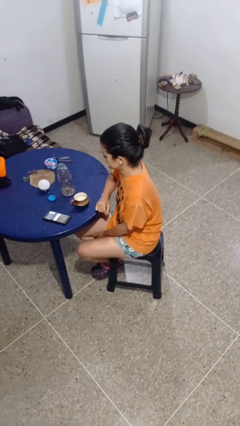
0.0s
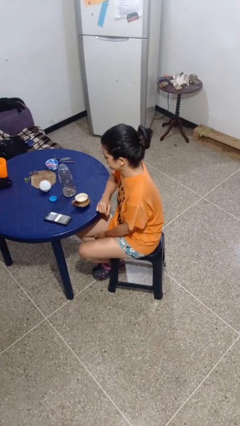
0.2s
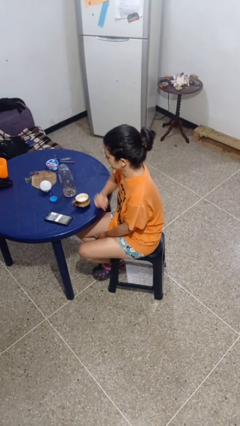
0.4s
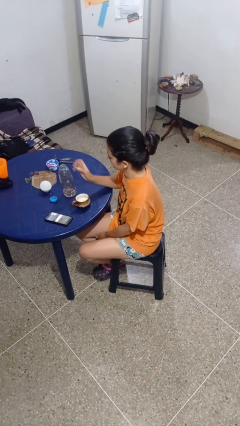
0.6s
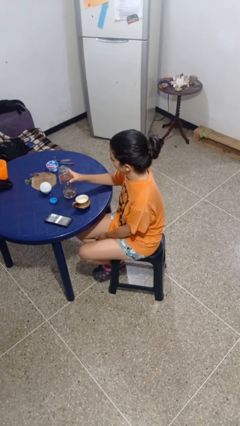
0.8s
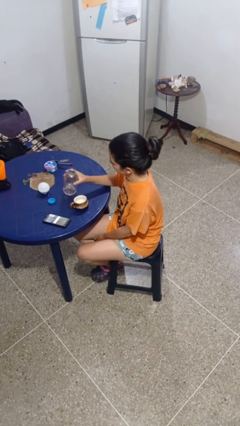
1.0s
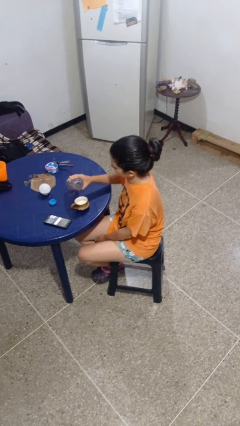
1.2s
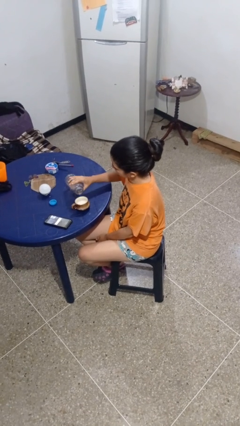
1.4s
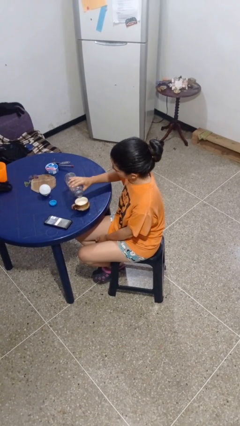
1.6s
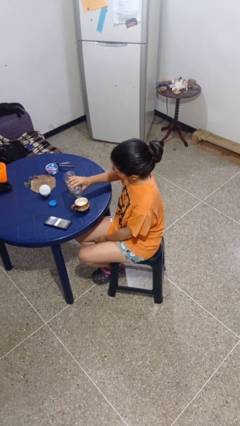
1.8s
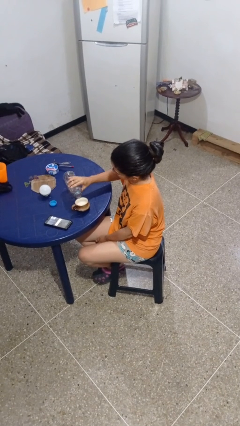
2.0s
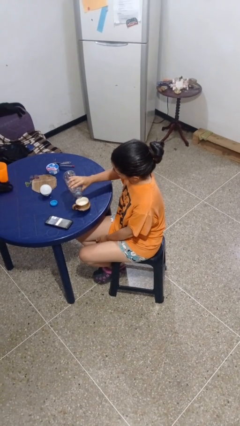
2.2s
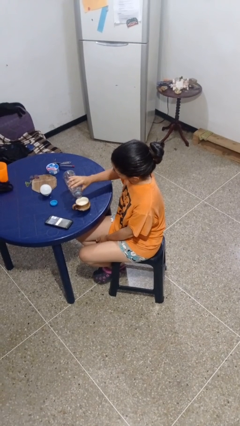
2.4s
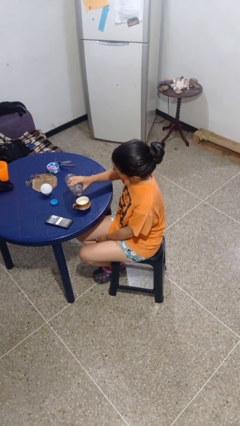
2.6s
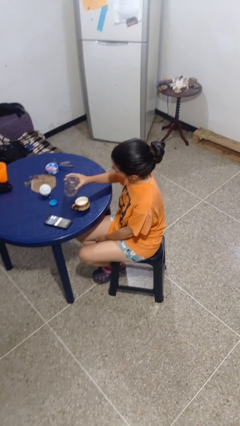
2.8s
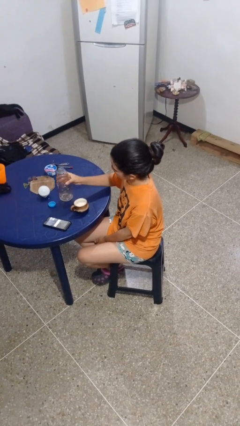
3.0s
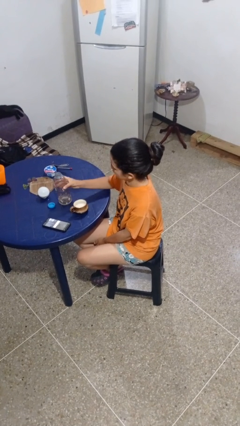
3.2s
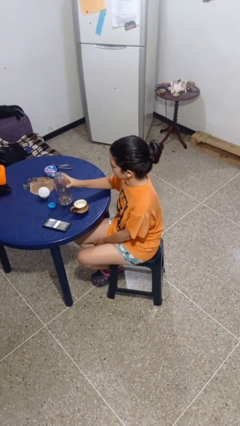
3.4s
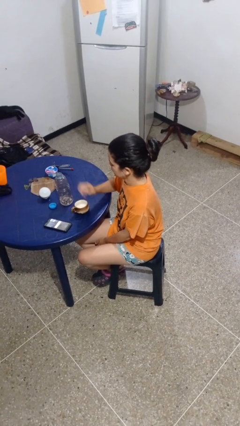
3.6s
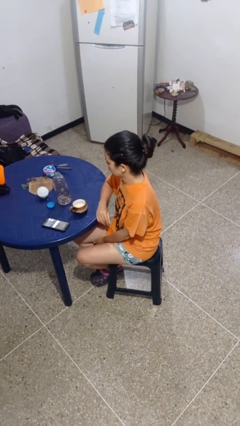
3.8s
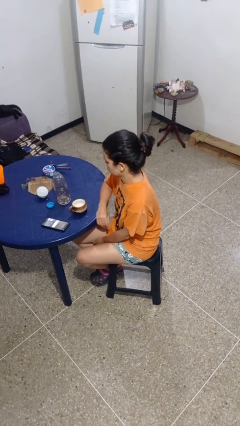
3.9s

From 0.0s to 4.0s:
person pours liquid into cup

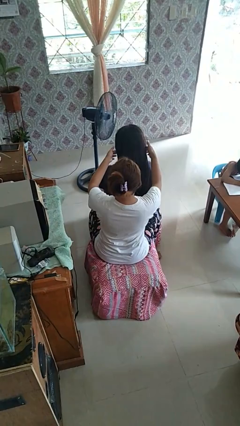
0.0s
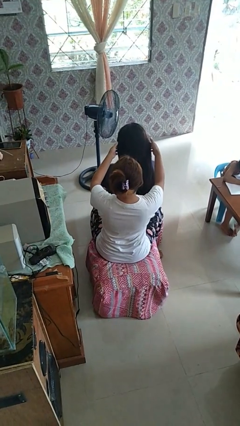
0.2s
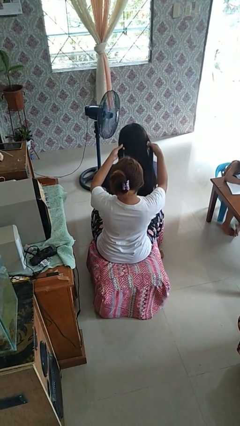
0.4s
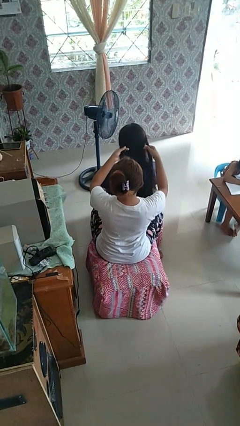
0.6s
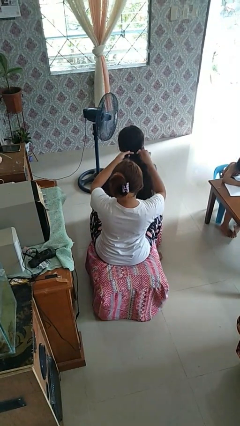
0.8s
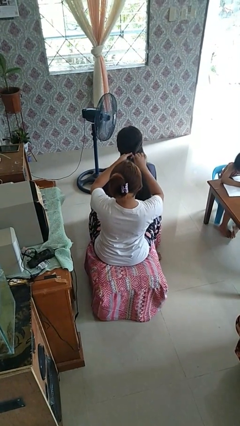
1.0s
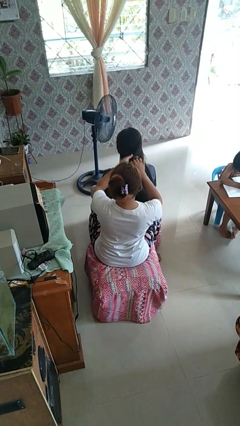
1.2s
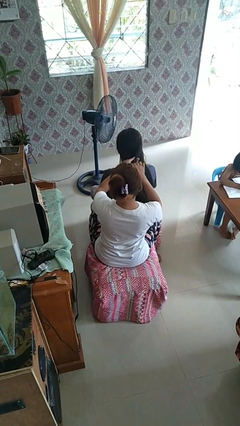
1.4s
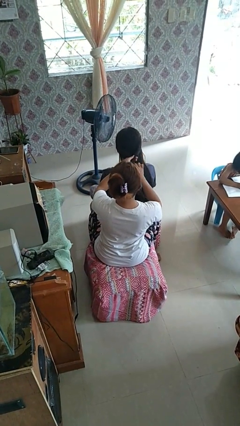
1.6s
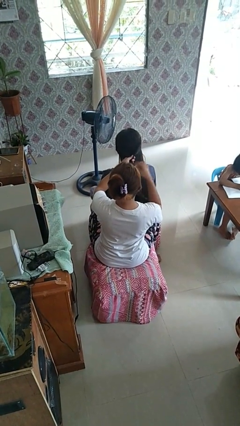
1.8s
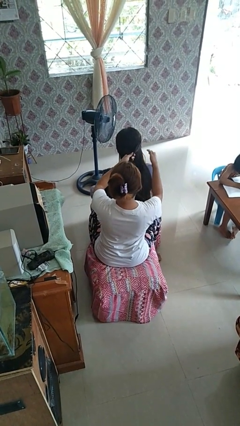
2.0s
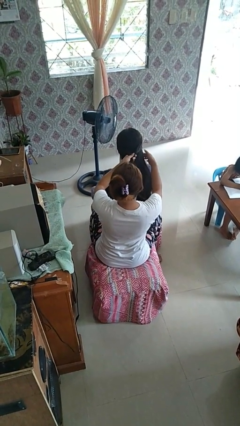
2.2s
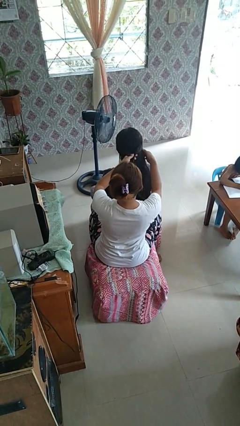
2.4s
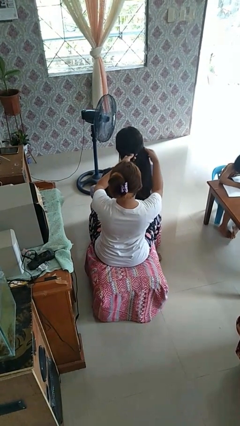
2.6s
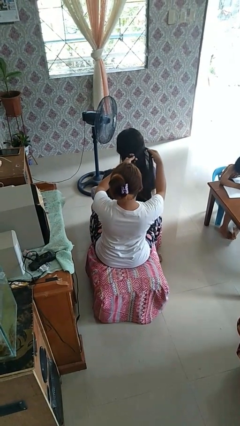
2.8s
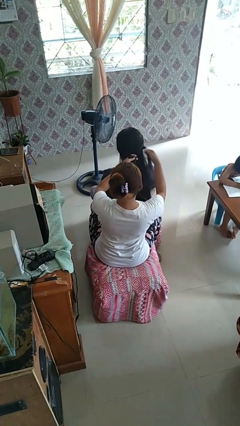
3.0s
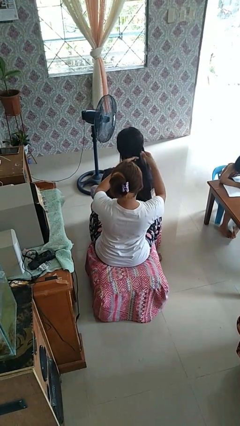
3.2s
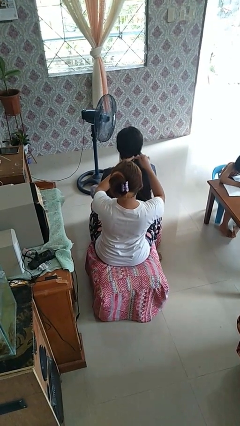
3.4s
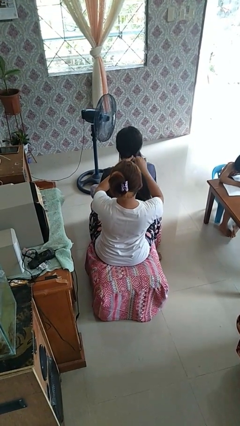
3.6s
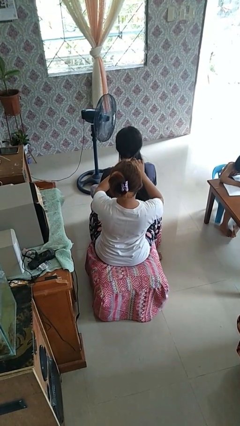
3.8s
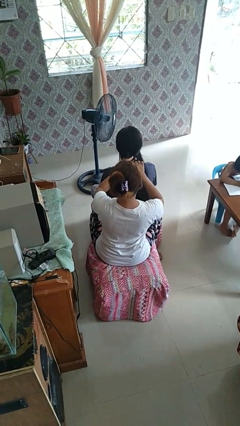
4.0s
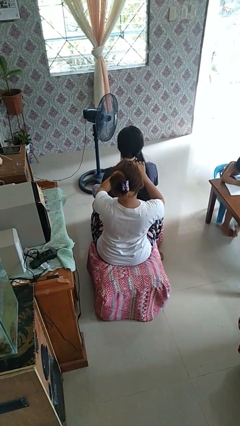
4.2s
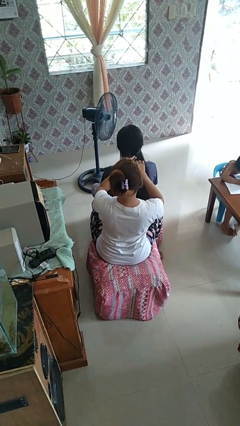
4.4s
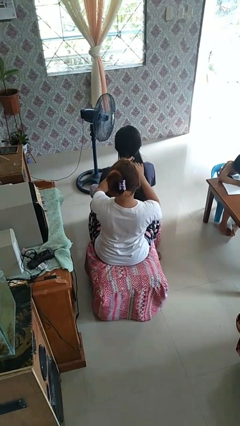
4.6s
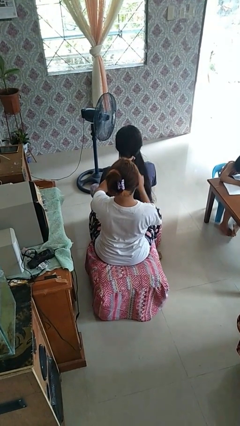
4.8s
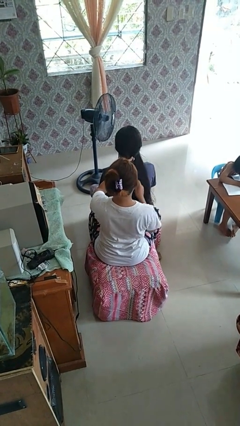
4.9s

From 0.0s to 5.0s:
person braids hair of person

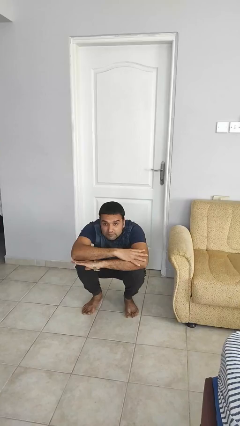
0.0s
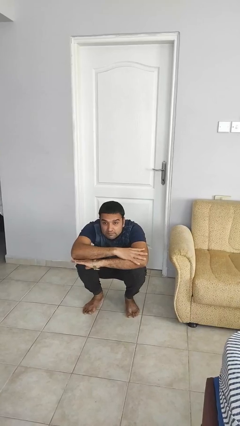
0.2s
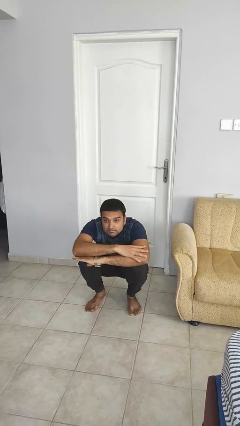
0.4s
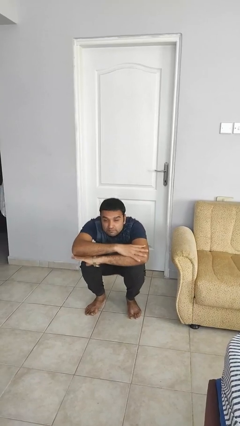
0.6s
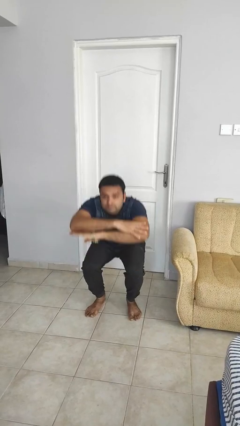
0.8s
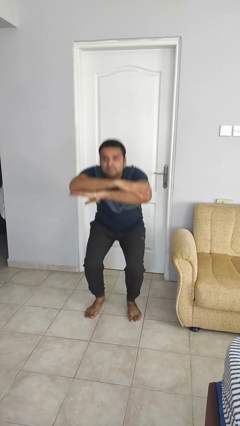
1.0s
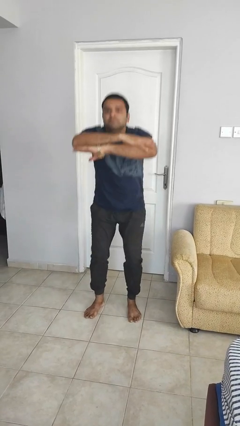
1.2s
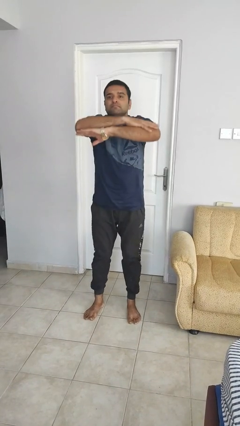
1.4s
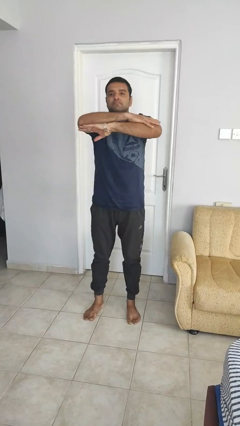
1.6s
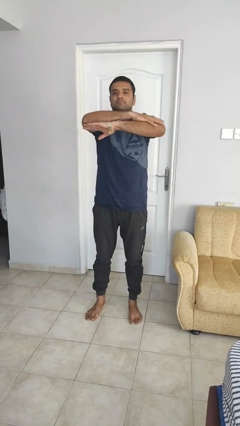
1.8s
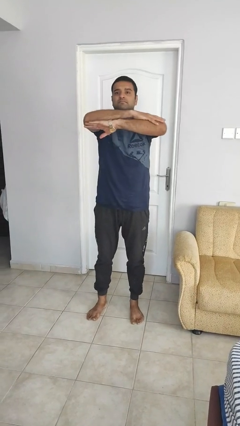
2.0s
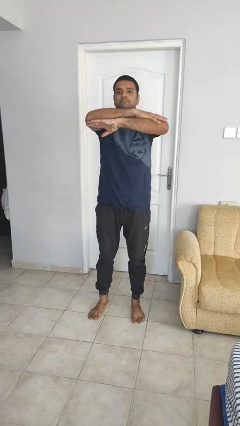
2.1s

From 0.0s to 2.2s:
person stands up

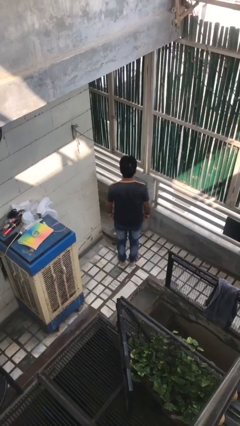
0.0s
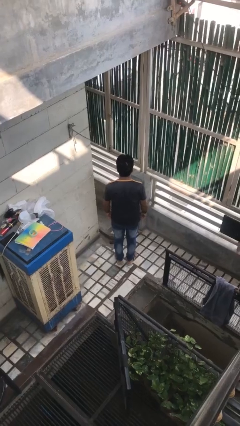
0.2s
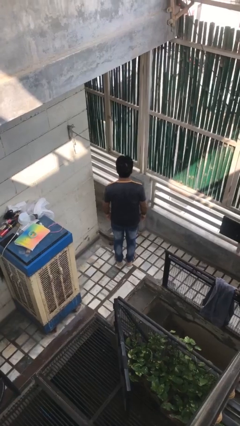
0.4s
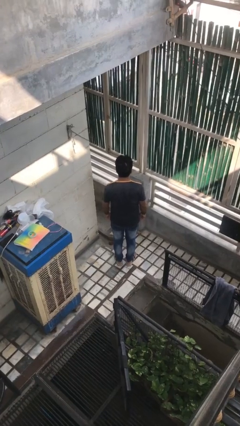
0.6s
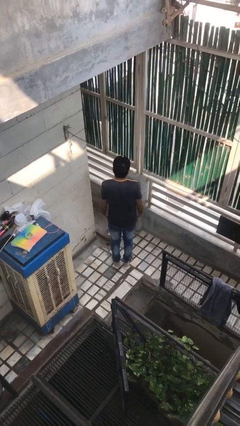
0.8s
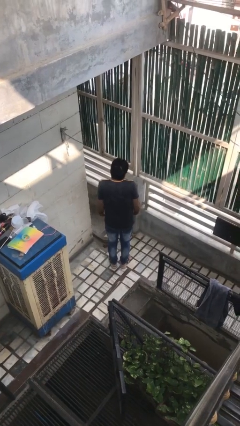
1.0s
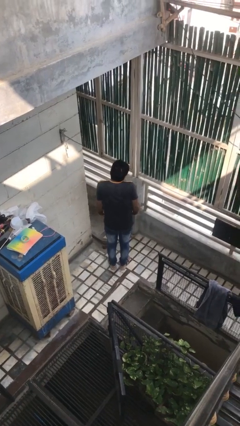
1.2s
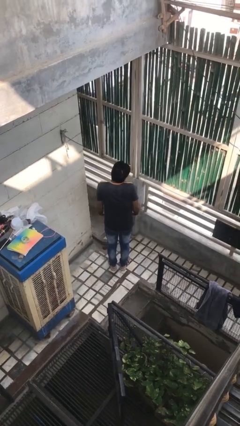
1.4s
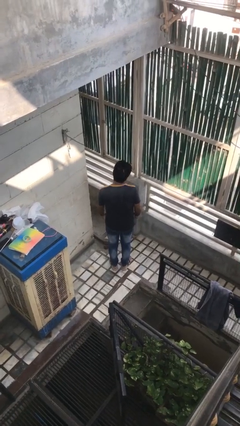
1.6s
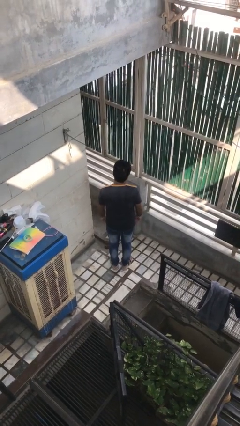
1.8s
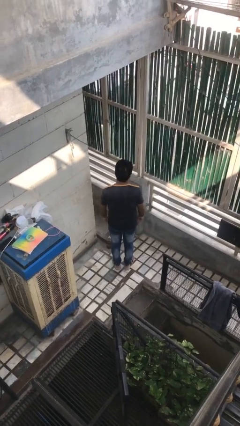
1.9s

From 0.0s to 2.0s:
person shrugs

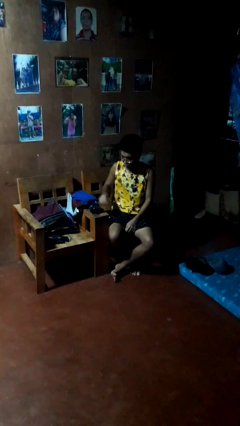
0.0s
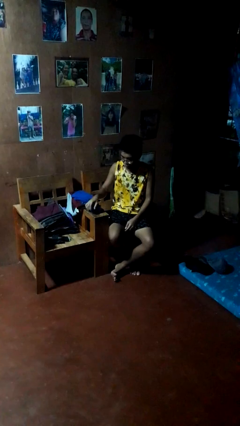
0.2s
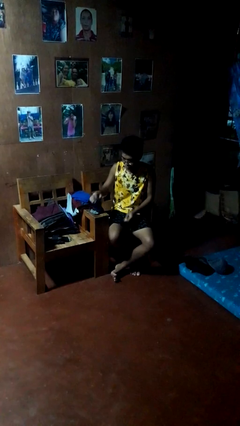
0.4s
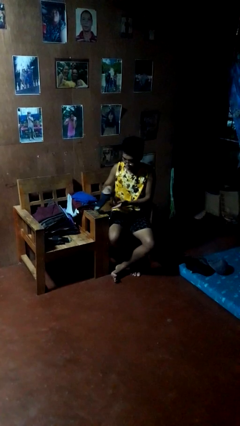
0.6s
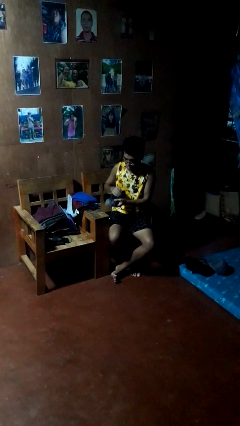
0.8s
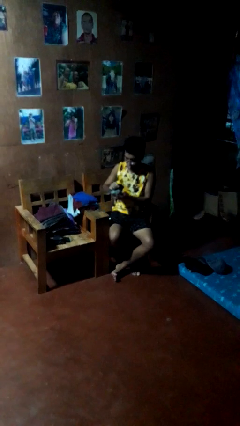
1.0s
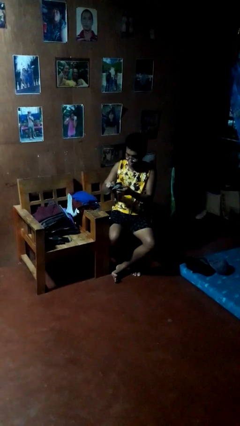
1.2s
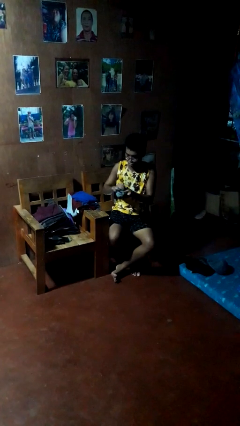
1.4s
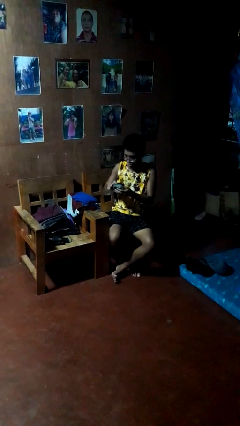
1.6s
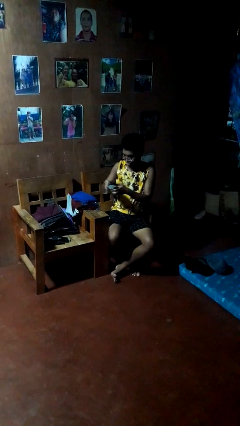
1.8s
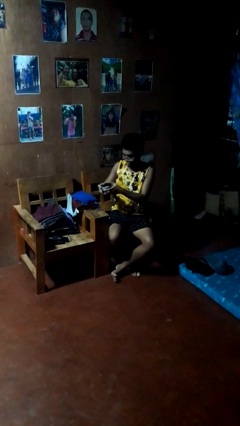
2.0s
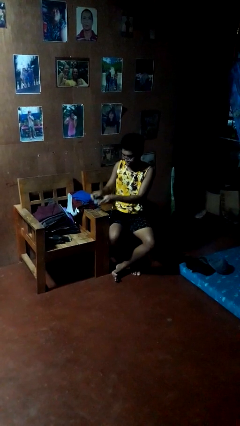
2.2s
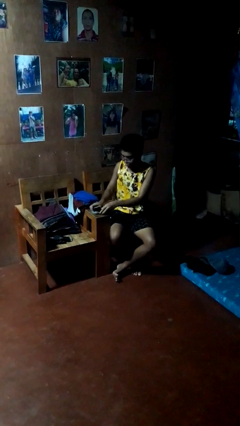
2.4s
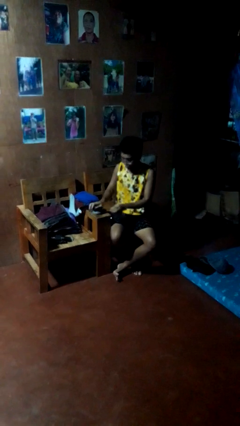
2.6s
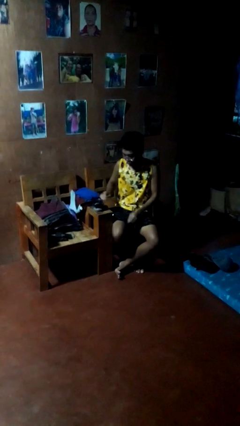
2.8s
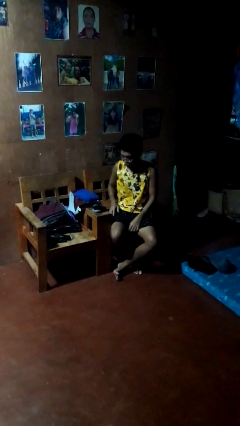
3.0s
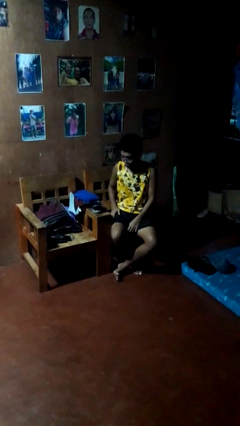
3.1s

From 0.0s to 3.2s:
person folds socks

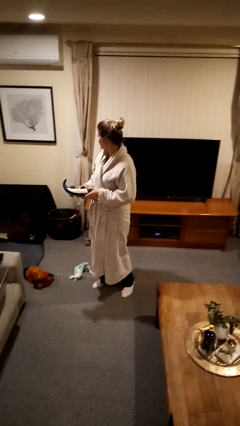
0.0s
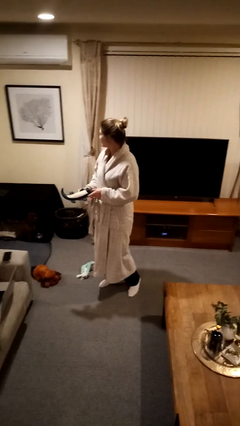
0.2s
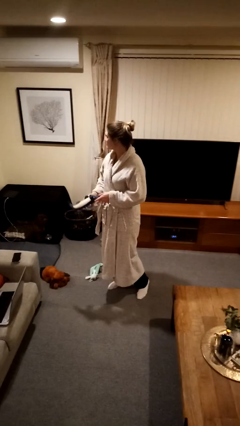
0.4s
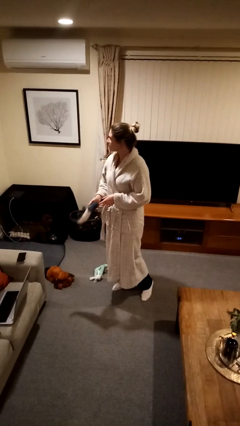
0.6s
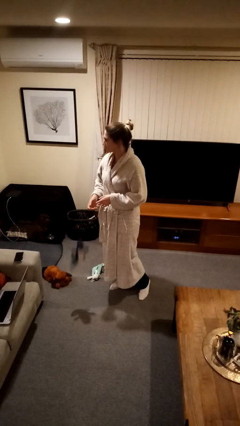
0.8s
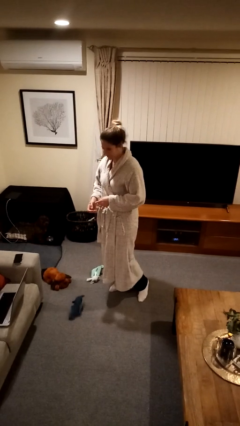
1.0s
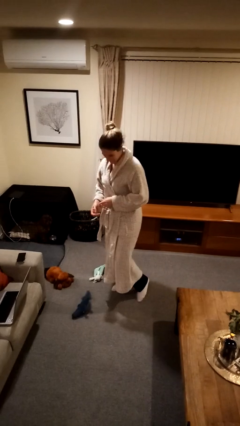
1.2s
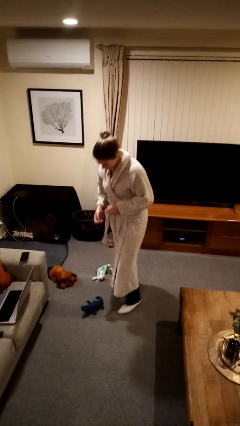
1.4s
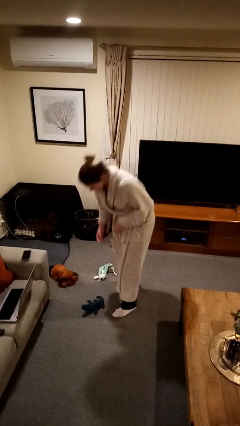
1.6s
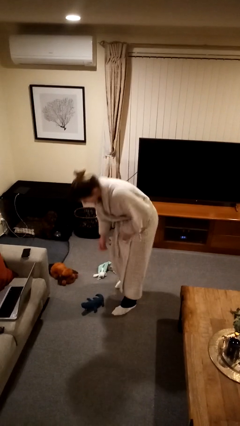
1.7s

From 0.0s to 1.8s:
person drops object
